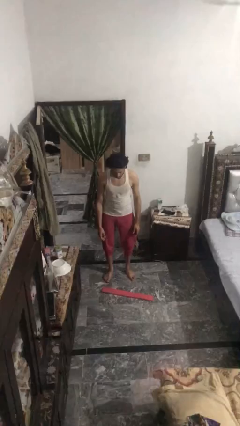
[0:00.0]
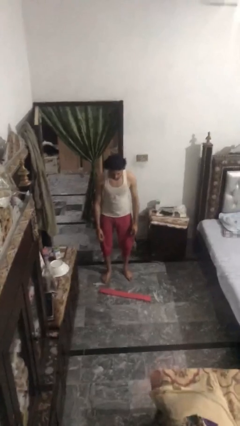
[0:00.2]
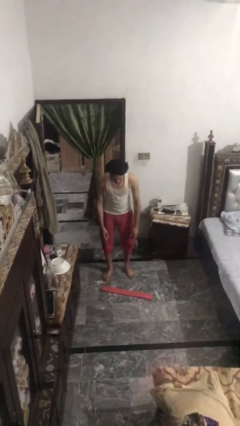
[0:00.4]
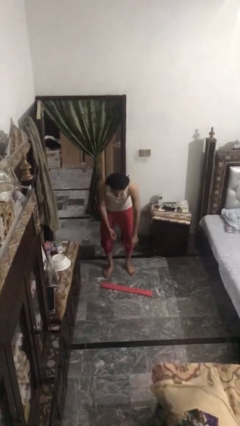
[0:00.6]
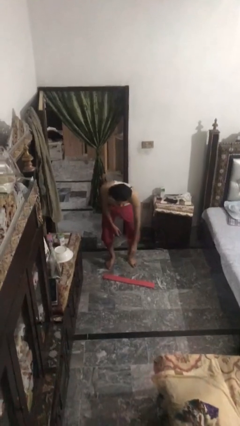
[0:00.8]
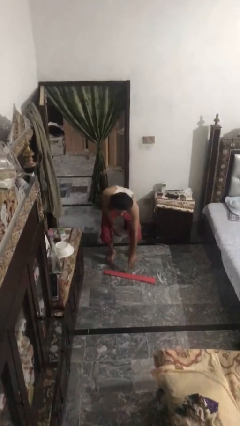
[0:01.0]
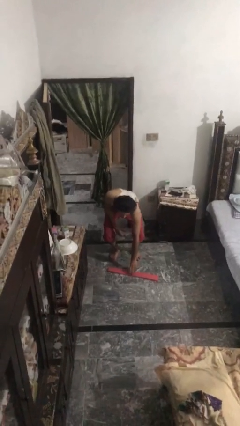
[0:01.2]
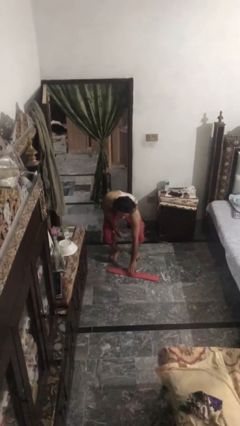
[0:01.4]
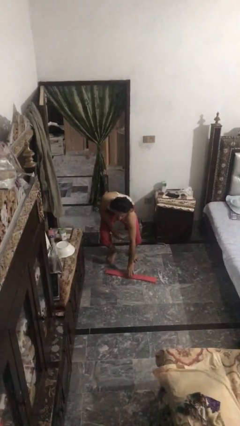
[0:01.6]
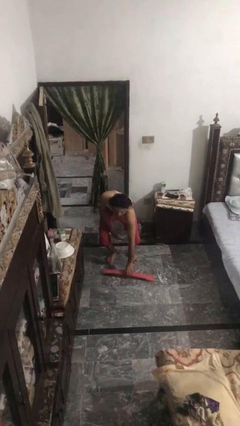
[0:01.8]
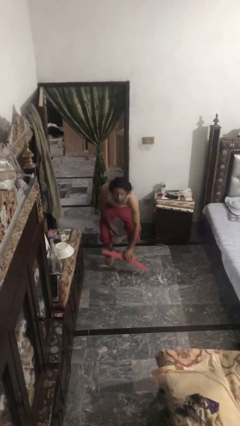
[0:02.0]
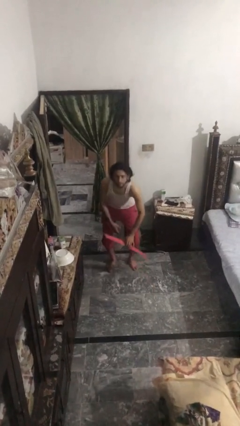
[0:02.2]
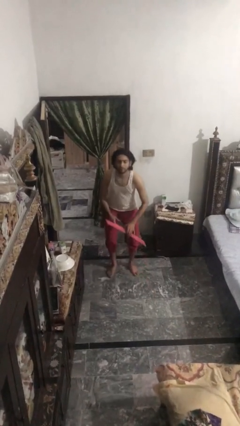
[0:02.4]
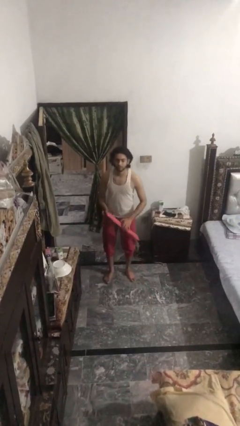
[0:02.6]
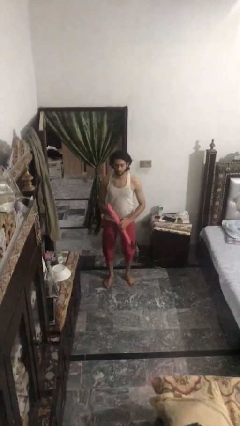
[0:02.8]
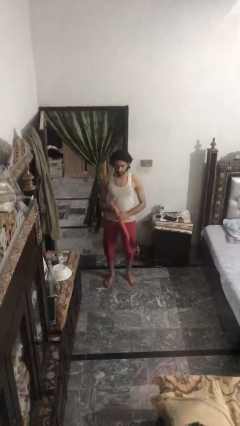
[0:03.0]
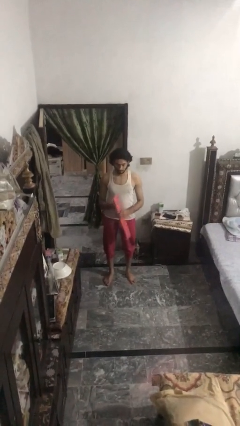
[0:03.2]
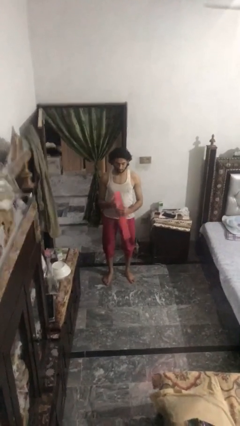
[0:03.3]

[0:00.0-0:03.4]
person picks up object from floor

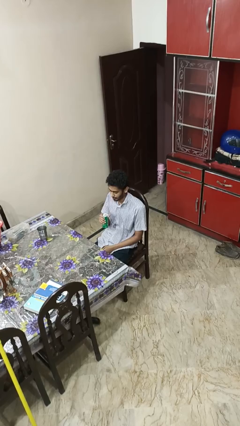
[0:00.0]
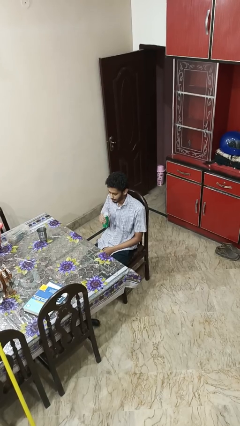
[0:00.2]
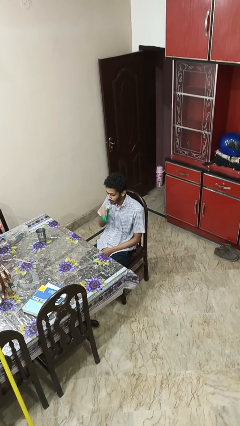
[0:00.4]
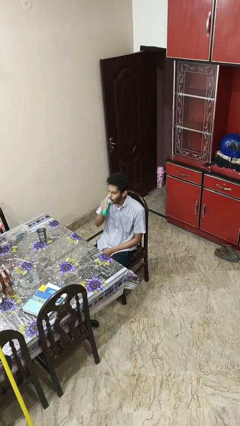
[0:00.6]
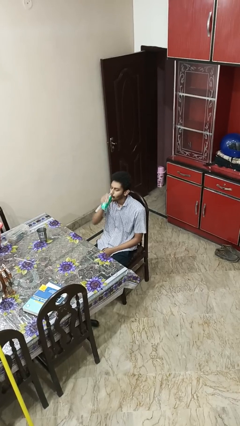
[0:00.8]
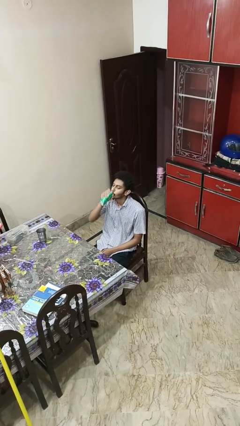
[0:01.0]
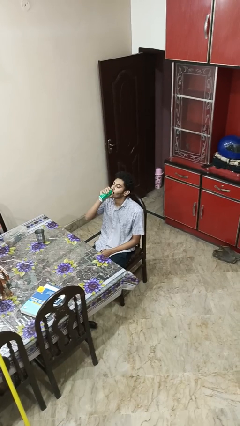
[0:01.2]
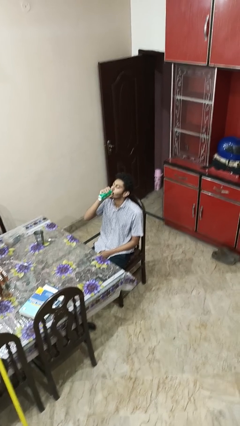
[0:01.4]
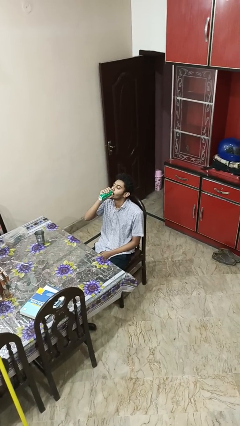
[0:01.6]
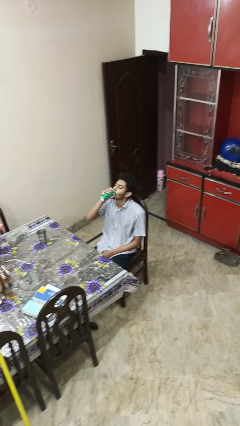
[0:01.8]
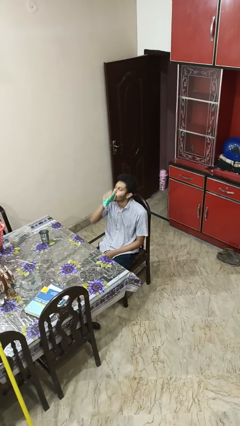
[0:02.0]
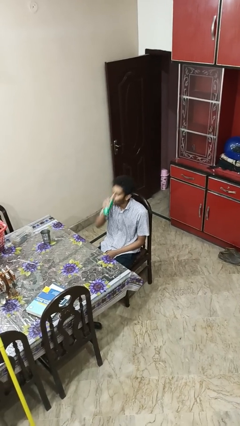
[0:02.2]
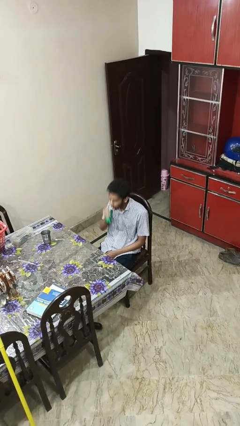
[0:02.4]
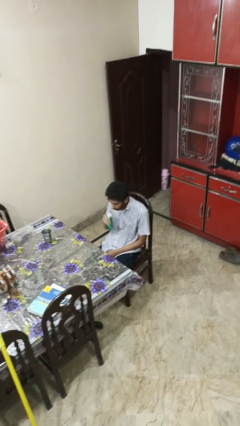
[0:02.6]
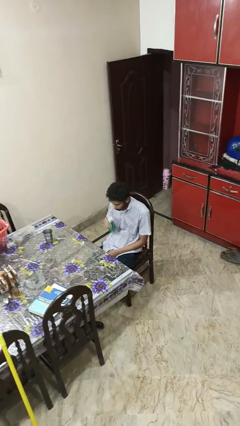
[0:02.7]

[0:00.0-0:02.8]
person drinks from beverage can

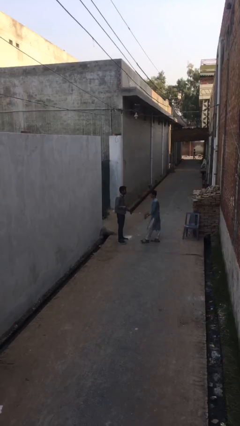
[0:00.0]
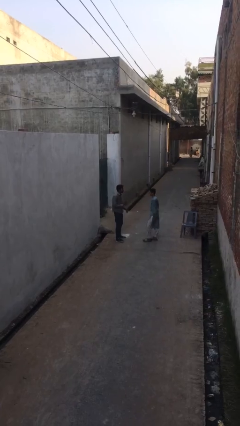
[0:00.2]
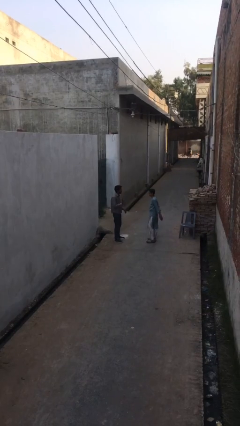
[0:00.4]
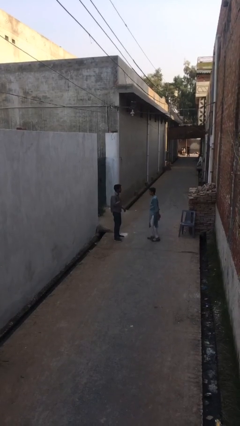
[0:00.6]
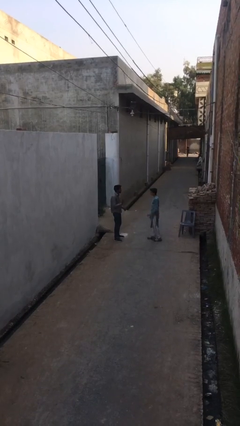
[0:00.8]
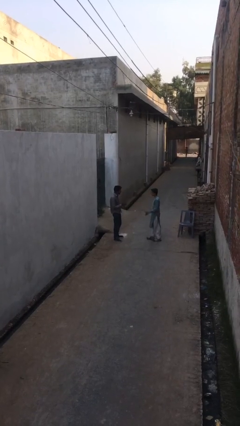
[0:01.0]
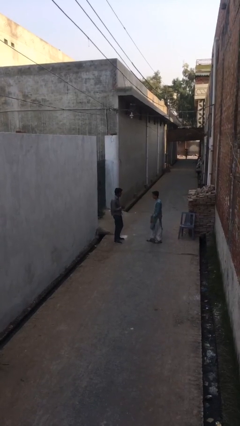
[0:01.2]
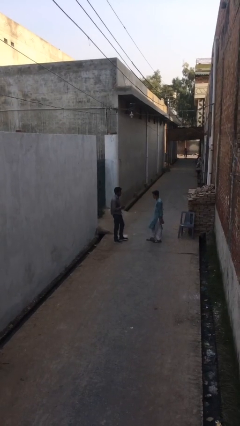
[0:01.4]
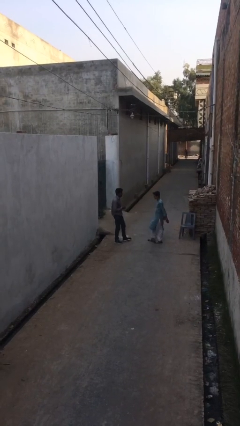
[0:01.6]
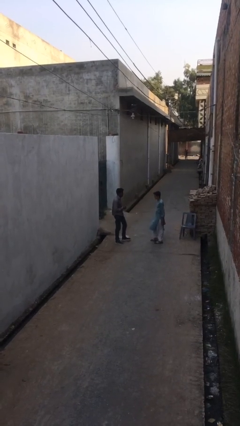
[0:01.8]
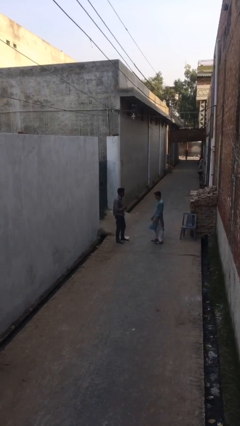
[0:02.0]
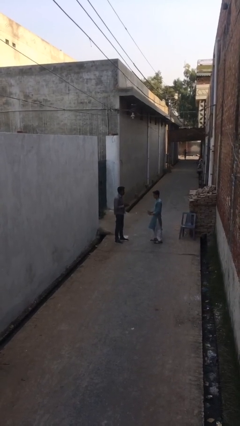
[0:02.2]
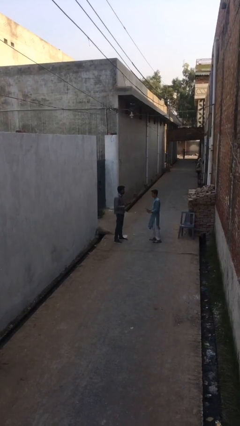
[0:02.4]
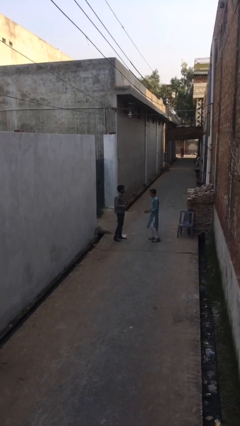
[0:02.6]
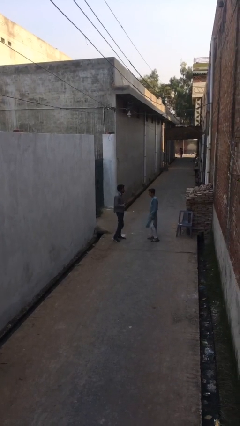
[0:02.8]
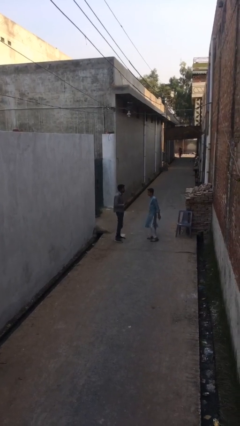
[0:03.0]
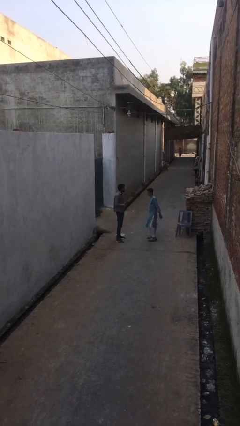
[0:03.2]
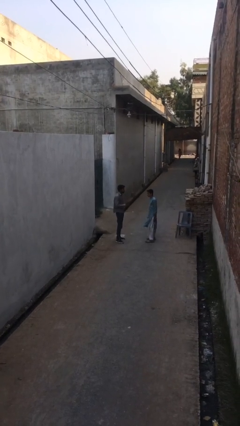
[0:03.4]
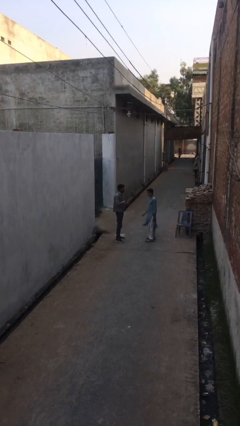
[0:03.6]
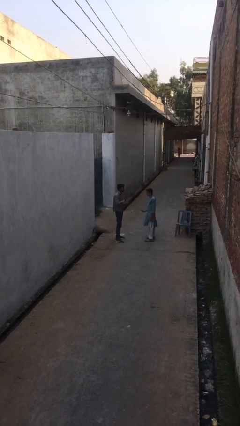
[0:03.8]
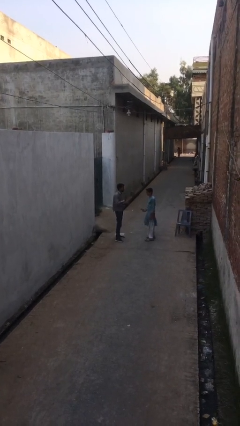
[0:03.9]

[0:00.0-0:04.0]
person talks to person

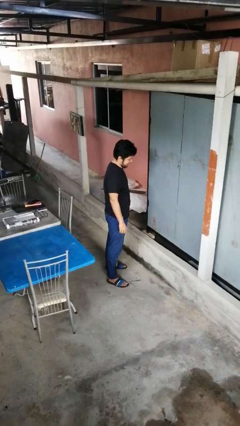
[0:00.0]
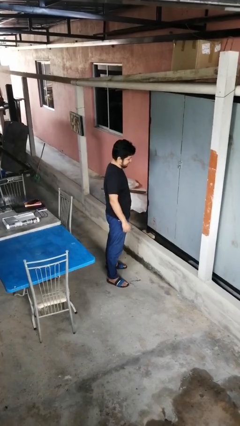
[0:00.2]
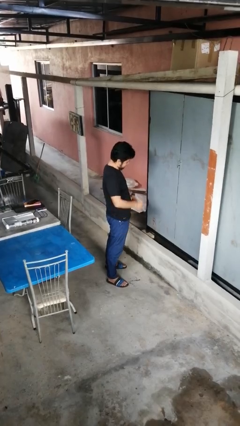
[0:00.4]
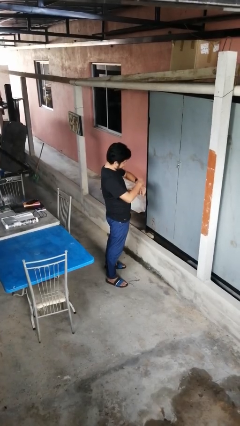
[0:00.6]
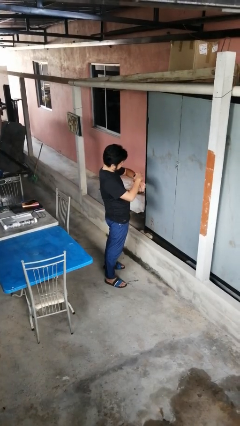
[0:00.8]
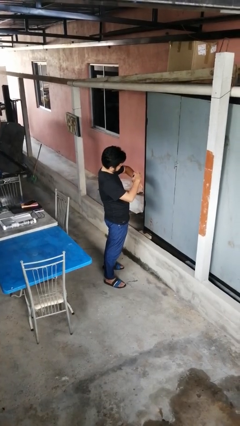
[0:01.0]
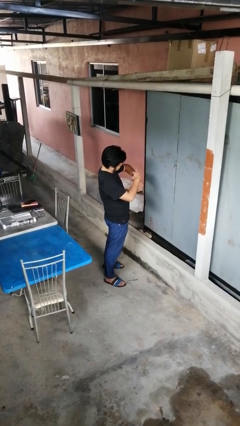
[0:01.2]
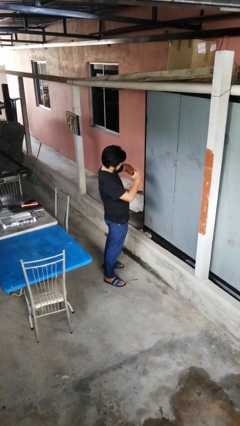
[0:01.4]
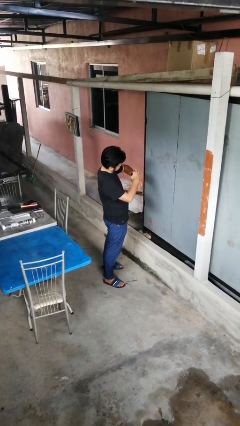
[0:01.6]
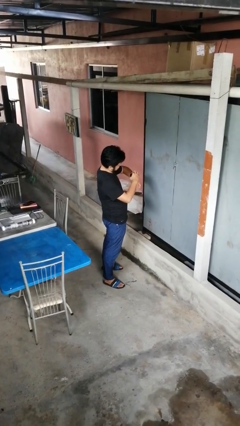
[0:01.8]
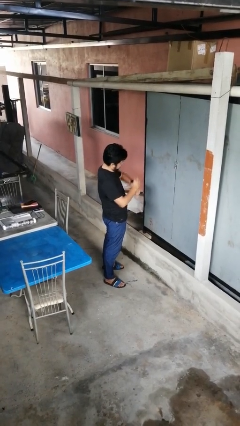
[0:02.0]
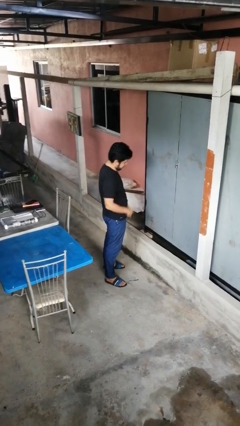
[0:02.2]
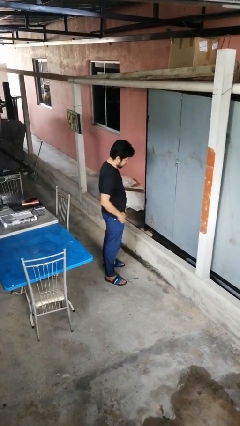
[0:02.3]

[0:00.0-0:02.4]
person looks at wristwatch

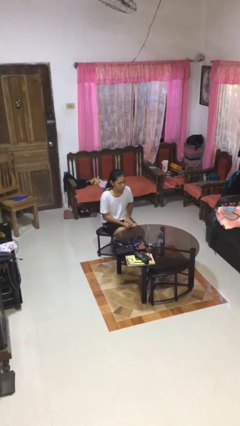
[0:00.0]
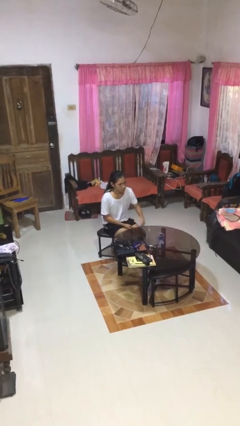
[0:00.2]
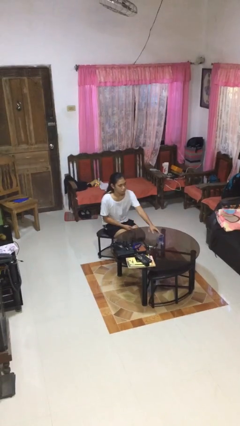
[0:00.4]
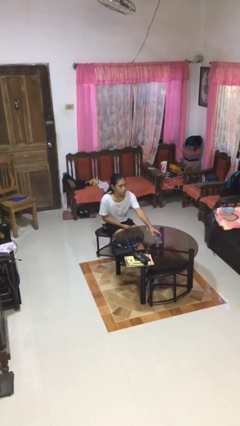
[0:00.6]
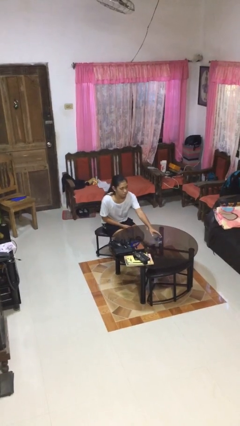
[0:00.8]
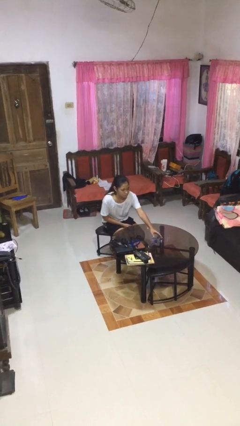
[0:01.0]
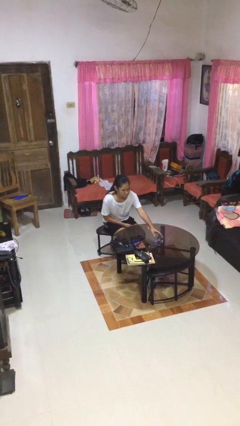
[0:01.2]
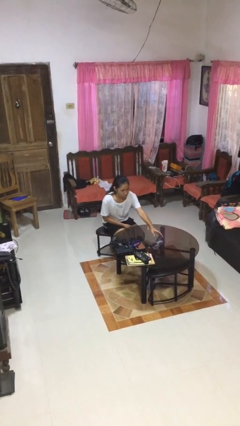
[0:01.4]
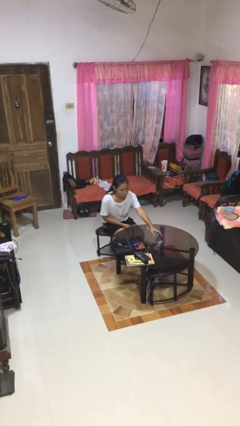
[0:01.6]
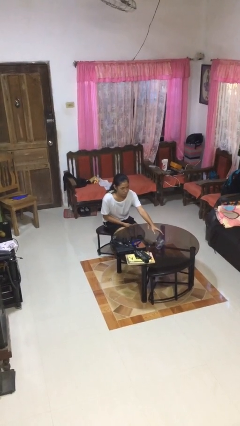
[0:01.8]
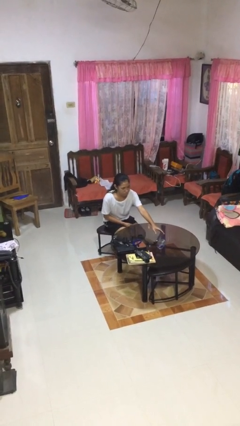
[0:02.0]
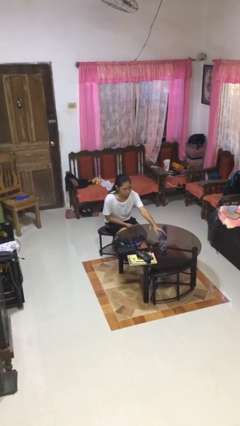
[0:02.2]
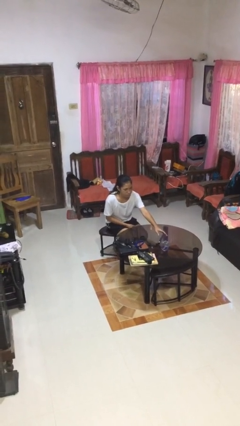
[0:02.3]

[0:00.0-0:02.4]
person knocks over glass

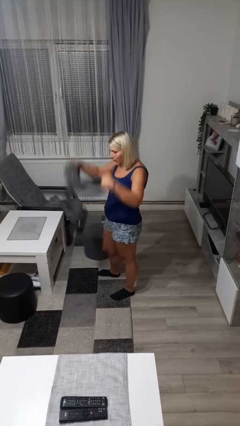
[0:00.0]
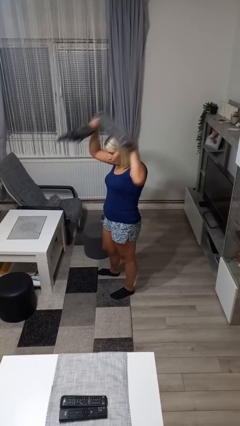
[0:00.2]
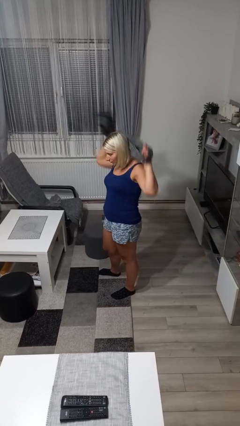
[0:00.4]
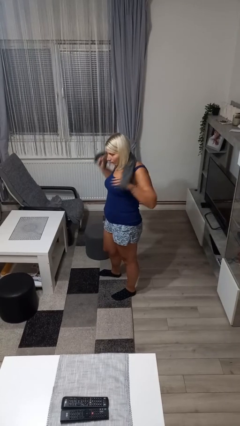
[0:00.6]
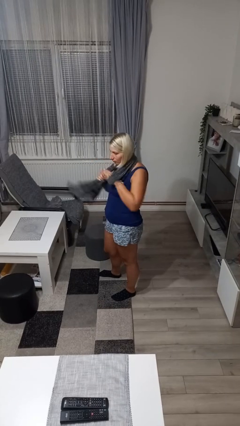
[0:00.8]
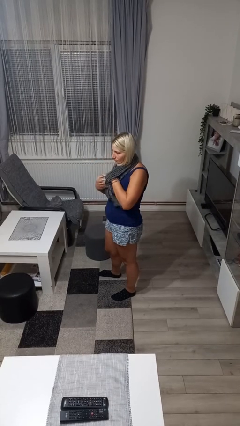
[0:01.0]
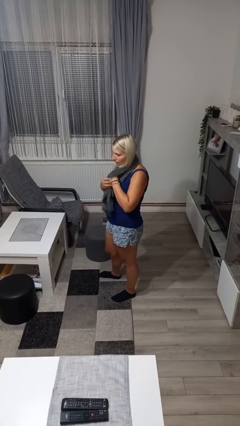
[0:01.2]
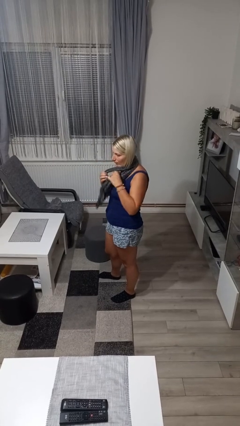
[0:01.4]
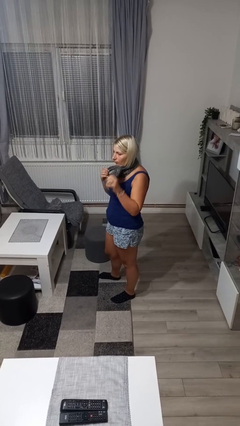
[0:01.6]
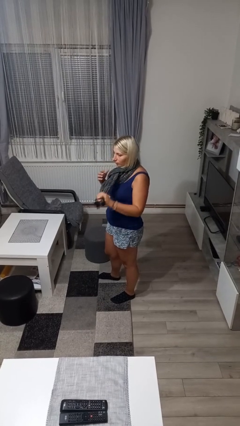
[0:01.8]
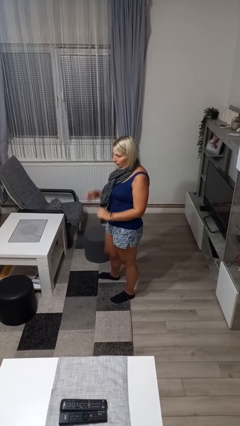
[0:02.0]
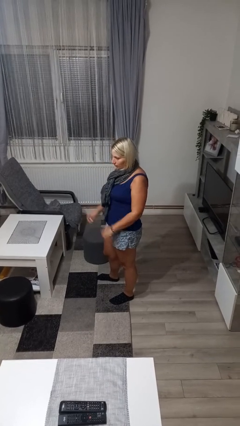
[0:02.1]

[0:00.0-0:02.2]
person puts on scarf

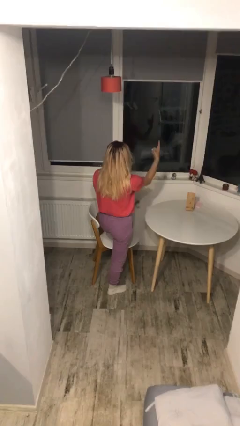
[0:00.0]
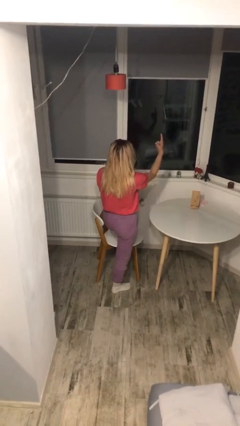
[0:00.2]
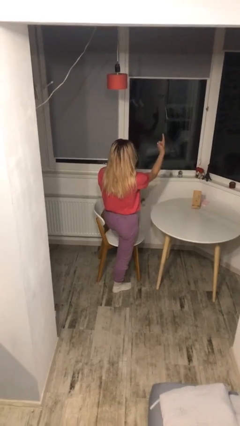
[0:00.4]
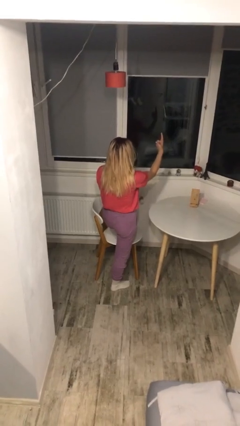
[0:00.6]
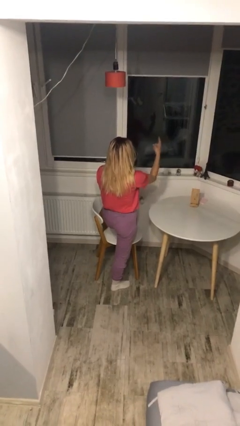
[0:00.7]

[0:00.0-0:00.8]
person gestures number one
